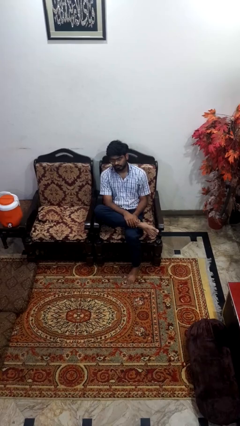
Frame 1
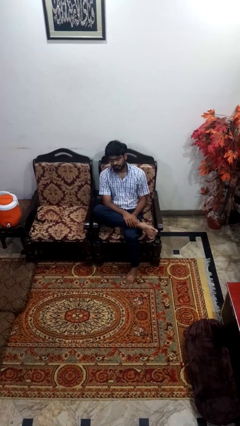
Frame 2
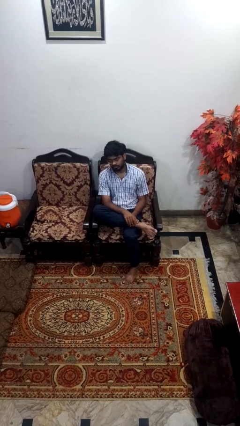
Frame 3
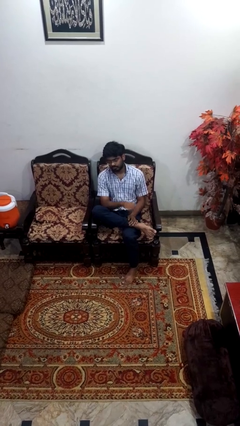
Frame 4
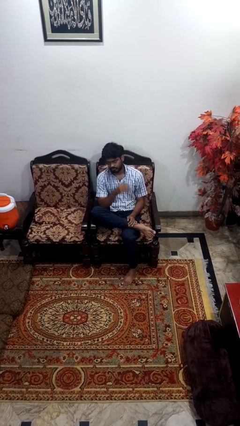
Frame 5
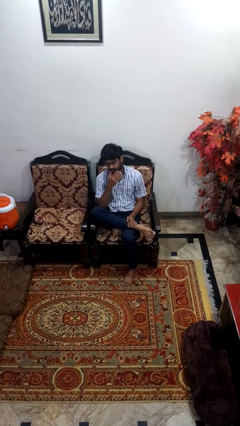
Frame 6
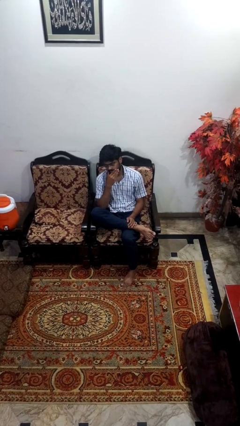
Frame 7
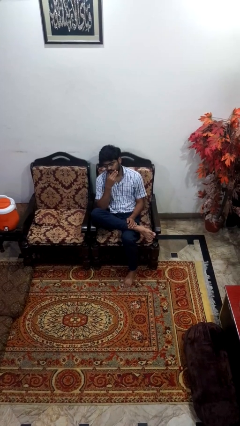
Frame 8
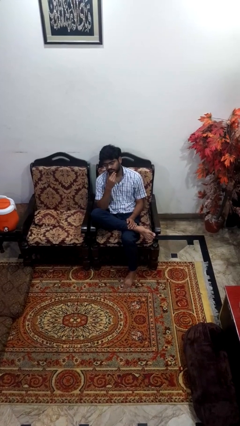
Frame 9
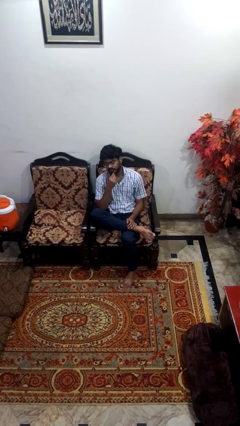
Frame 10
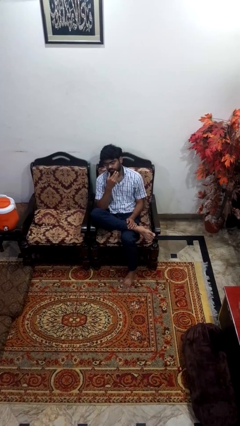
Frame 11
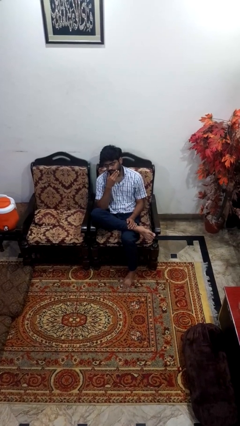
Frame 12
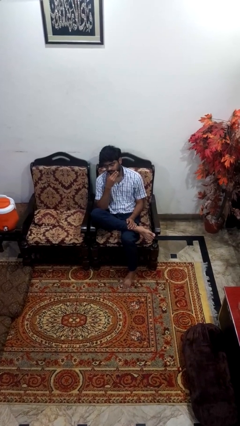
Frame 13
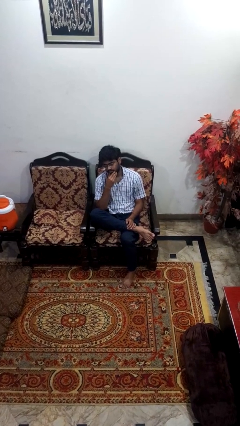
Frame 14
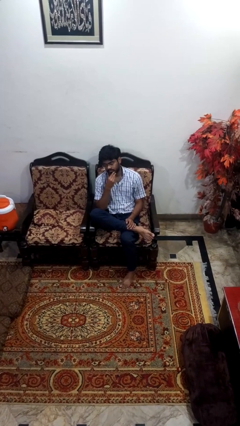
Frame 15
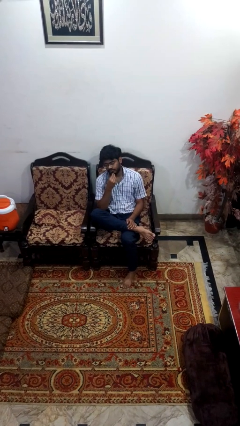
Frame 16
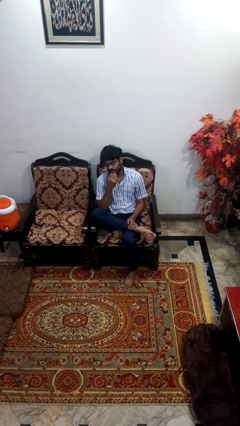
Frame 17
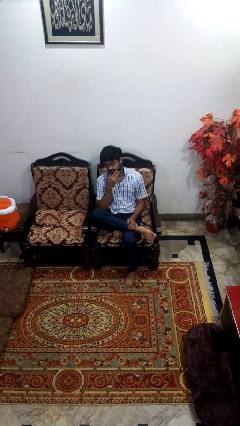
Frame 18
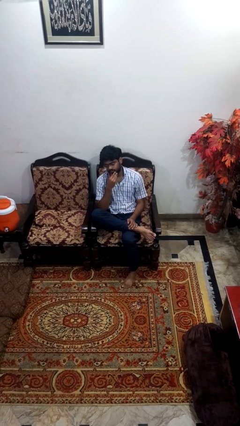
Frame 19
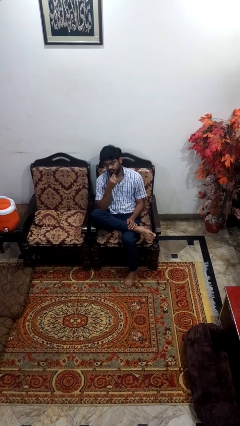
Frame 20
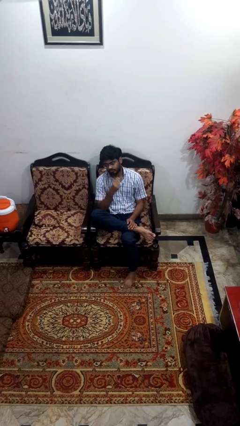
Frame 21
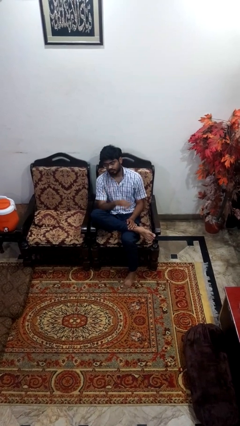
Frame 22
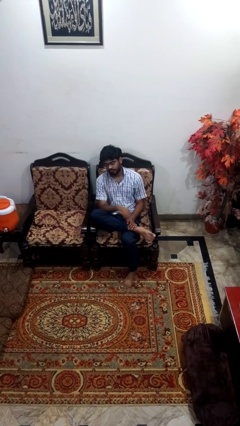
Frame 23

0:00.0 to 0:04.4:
person strokes chin

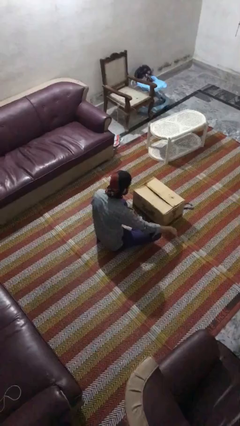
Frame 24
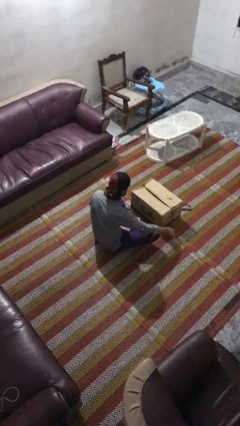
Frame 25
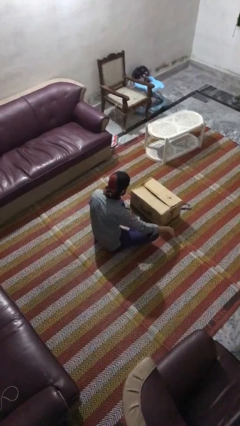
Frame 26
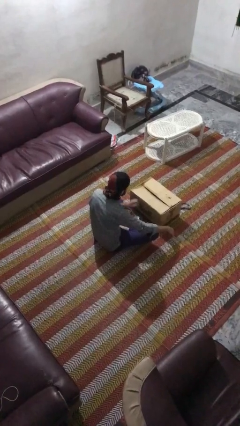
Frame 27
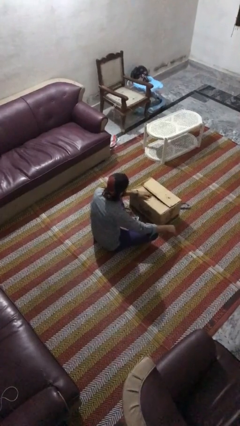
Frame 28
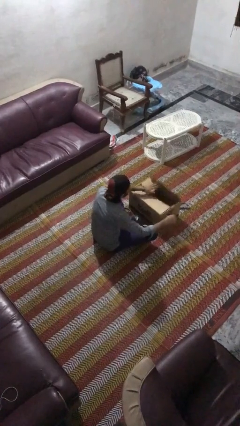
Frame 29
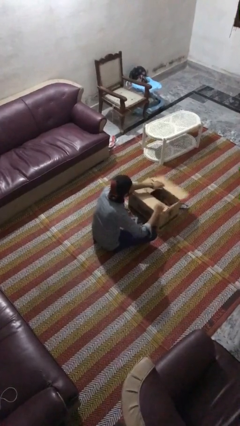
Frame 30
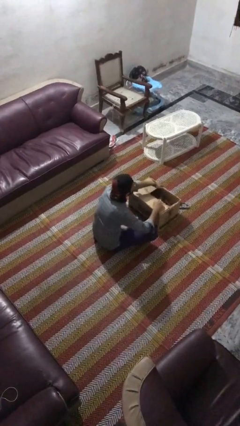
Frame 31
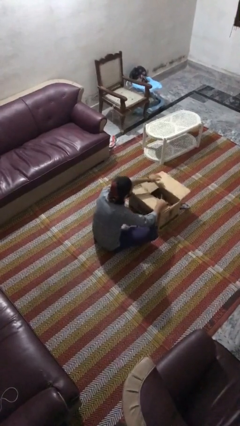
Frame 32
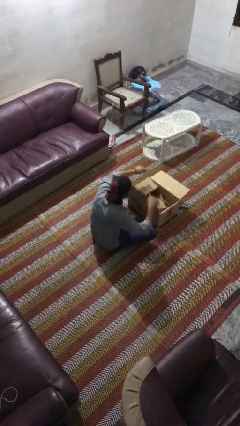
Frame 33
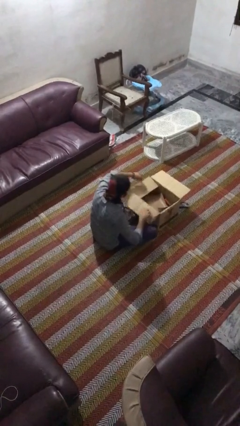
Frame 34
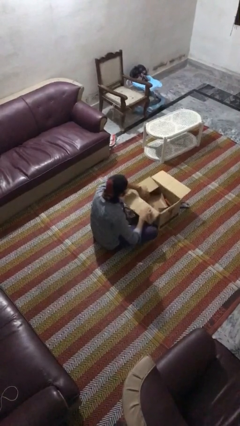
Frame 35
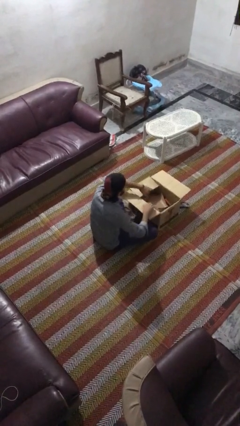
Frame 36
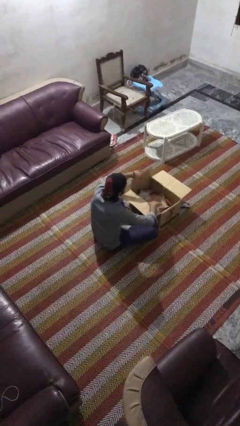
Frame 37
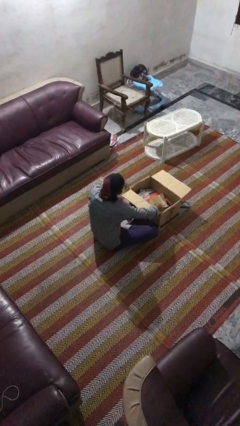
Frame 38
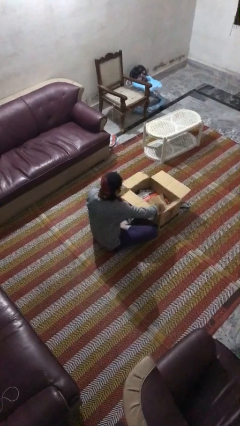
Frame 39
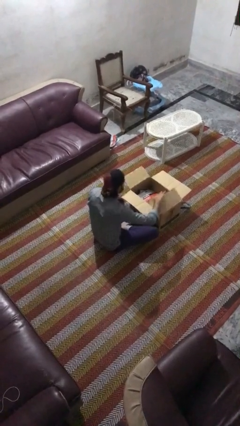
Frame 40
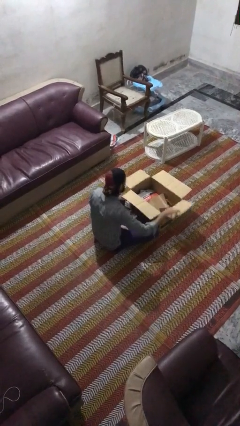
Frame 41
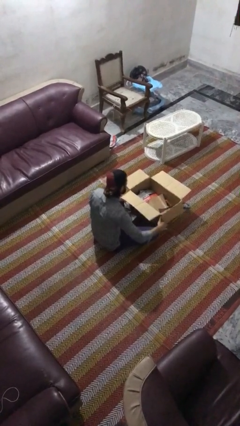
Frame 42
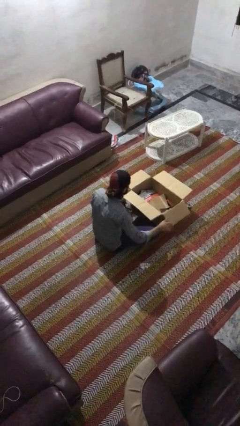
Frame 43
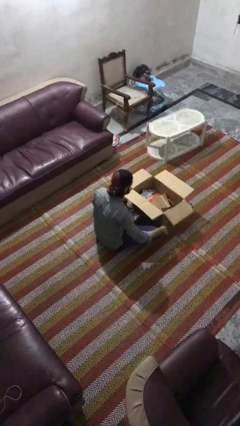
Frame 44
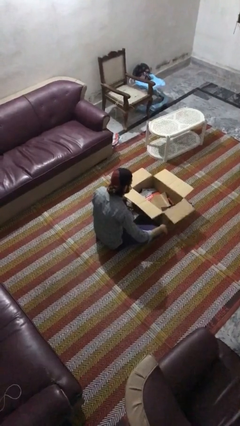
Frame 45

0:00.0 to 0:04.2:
person opens box

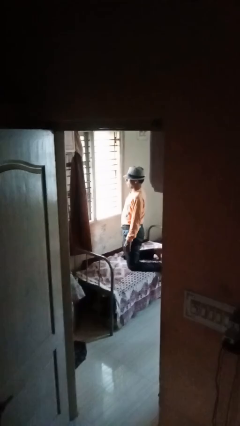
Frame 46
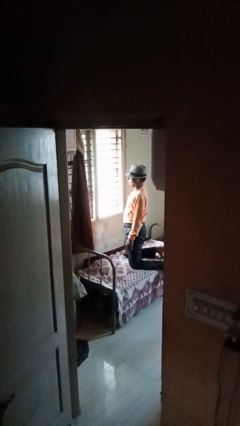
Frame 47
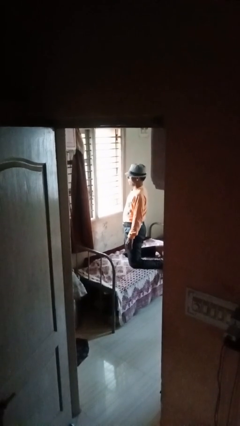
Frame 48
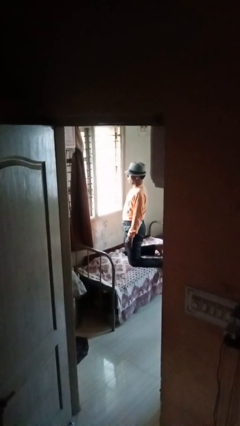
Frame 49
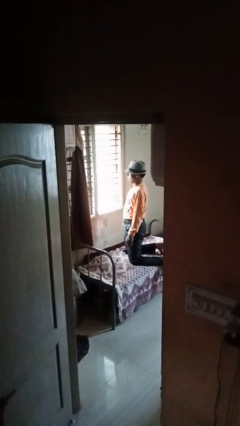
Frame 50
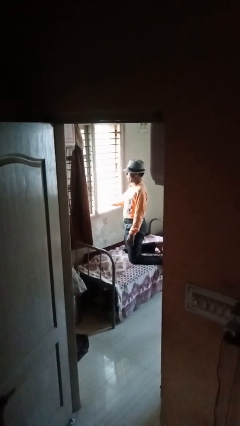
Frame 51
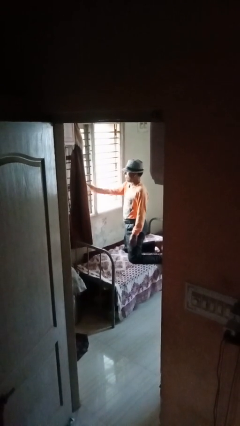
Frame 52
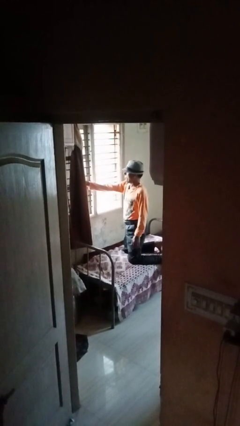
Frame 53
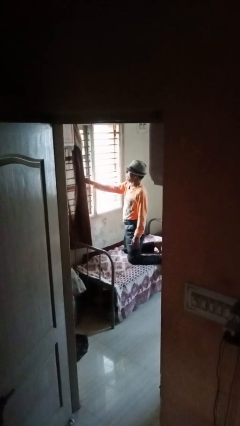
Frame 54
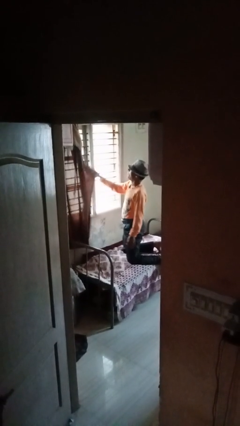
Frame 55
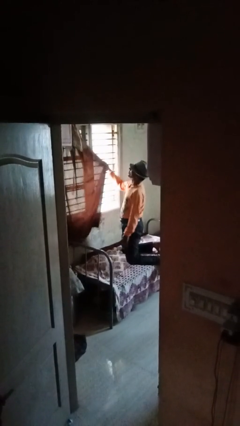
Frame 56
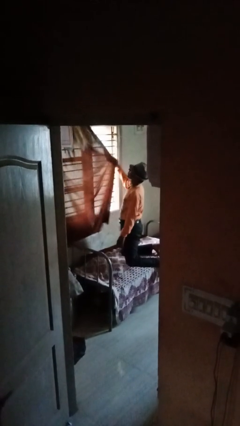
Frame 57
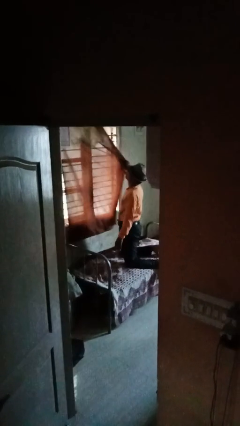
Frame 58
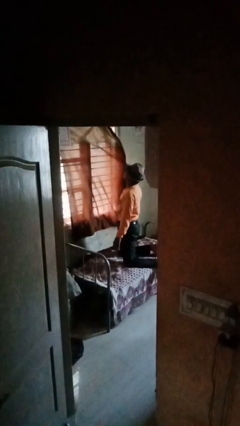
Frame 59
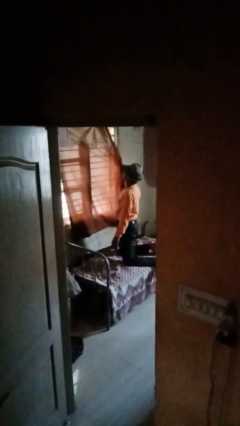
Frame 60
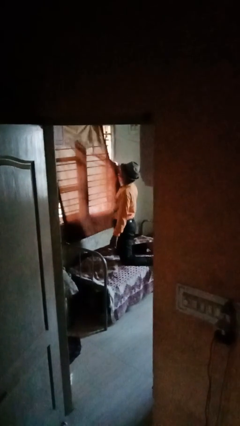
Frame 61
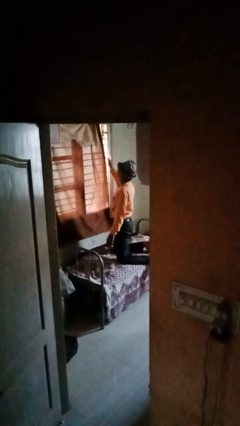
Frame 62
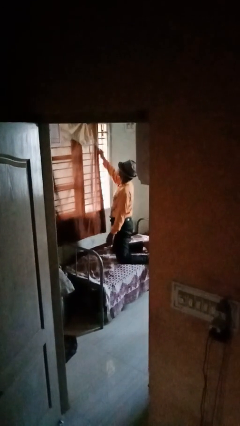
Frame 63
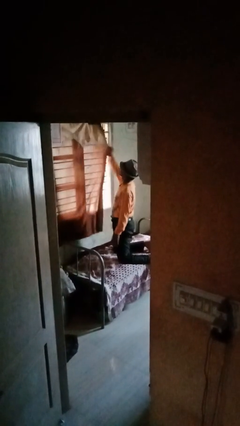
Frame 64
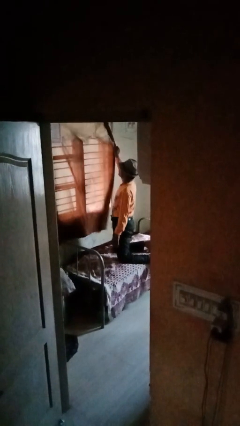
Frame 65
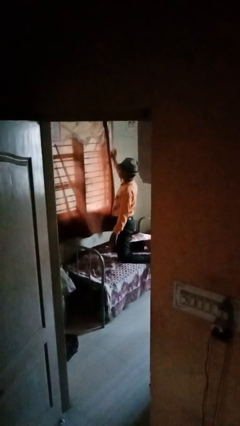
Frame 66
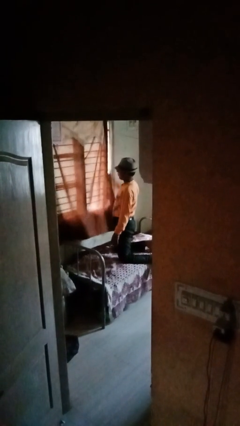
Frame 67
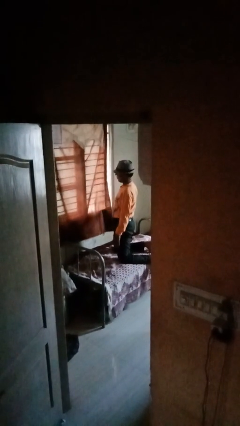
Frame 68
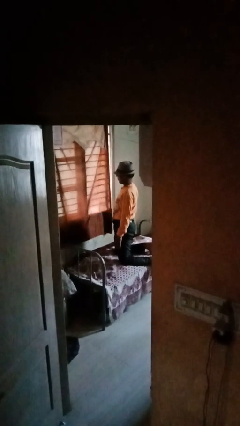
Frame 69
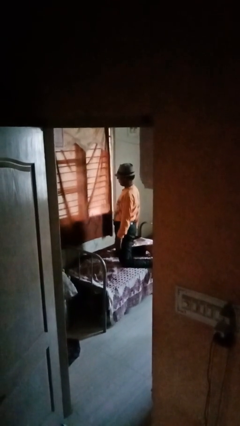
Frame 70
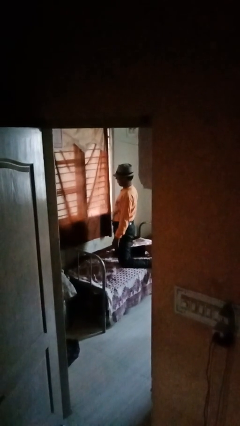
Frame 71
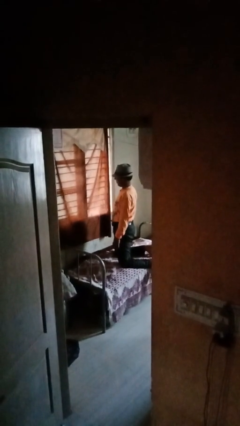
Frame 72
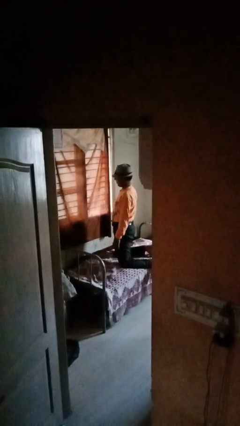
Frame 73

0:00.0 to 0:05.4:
person closes curtains

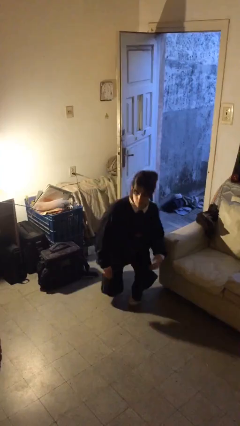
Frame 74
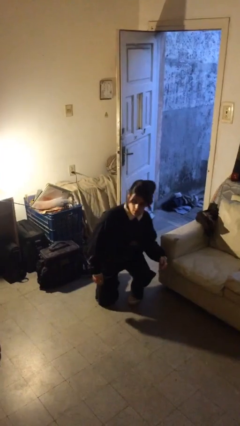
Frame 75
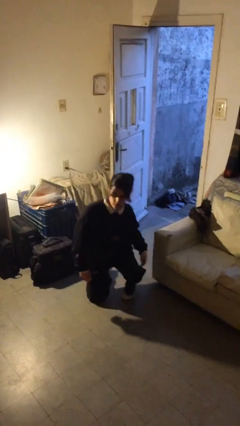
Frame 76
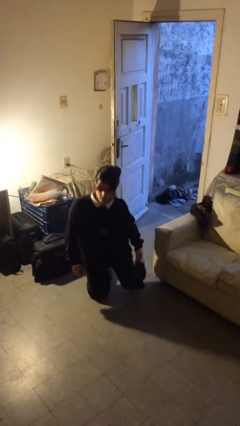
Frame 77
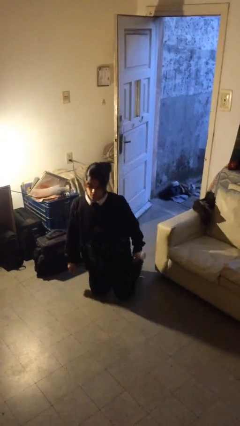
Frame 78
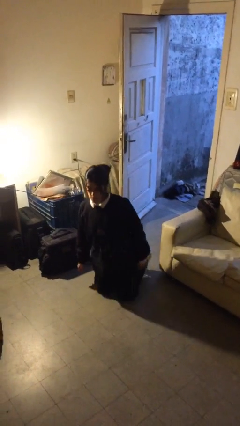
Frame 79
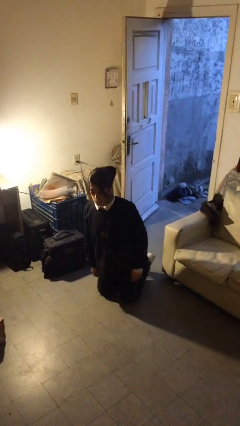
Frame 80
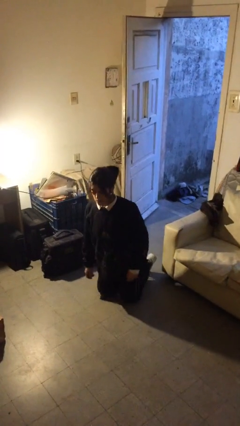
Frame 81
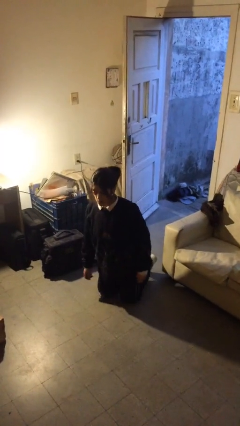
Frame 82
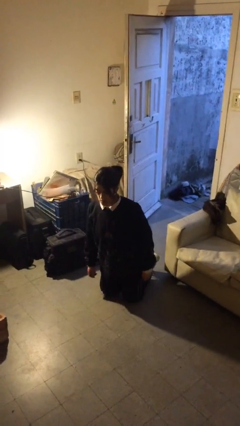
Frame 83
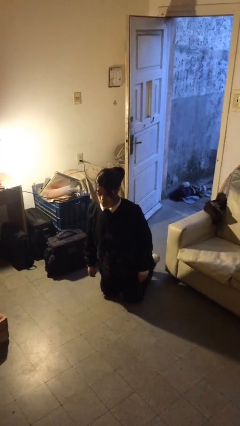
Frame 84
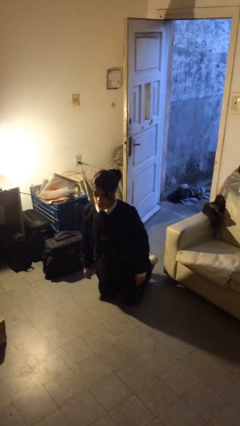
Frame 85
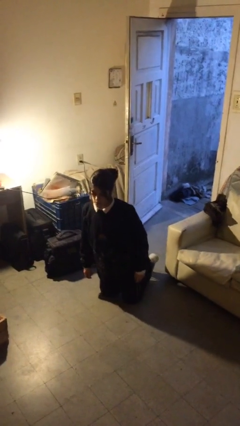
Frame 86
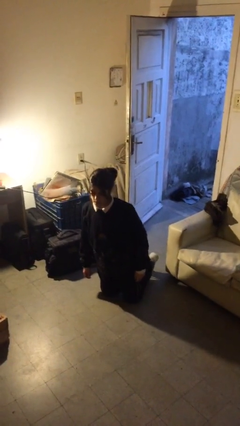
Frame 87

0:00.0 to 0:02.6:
person kneels

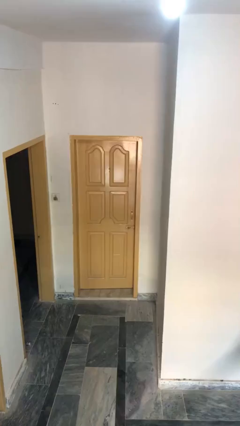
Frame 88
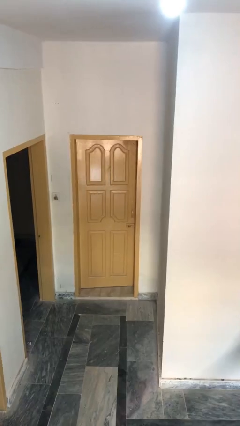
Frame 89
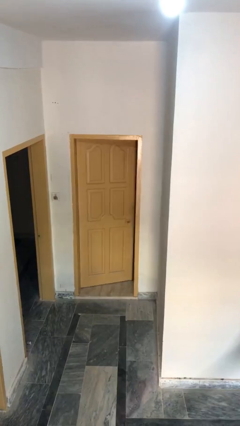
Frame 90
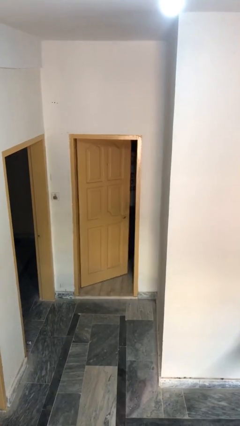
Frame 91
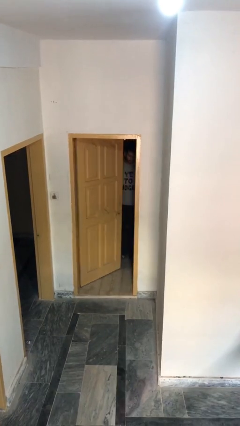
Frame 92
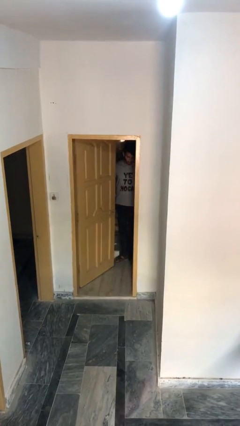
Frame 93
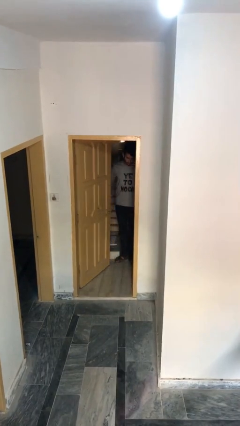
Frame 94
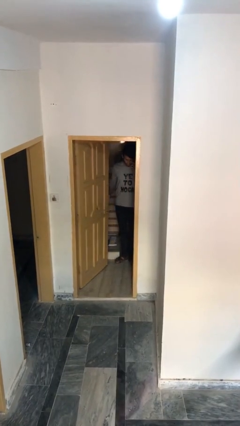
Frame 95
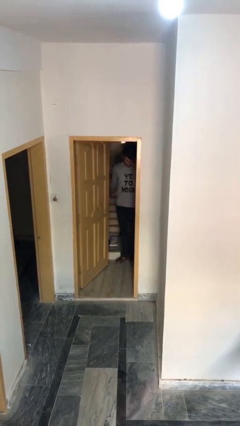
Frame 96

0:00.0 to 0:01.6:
person opens facility door
